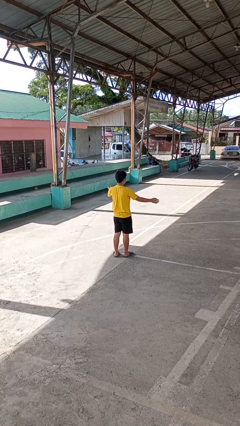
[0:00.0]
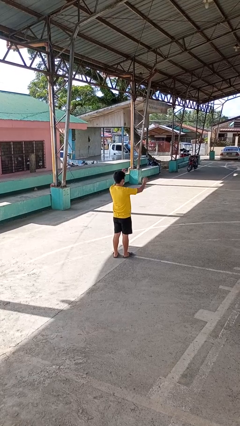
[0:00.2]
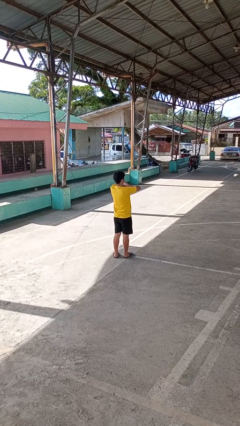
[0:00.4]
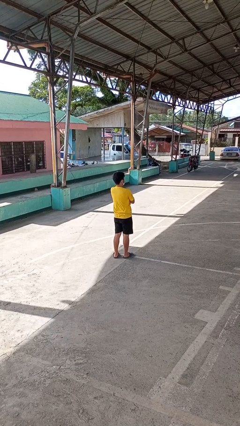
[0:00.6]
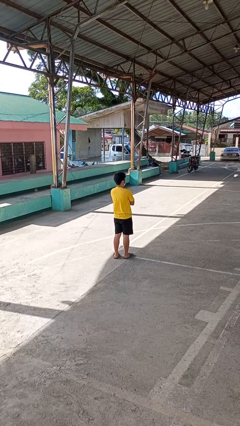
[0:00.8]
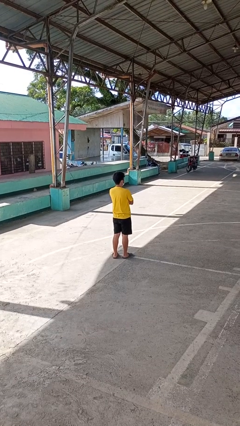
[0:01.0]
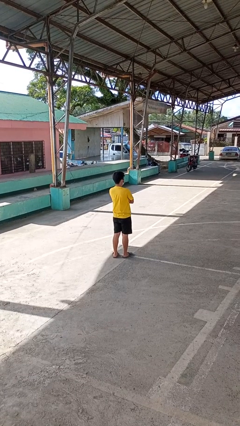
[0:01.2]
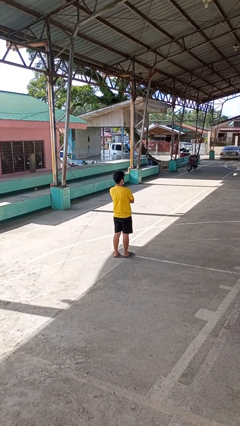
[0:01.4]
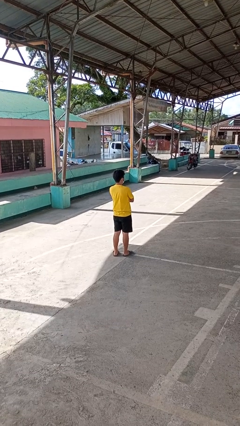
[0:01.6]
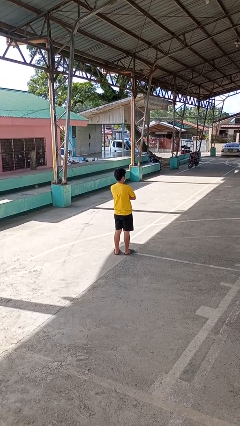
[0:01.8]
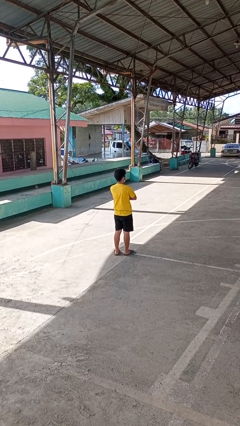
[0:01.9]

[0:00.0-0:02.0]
person crosses arms

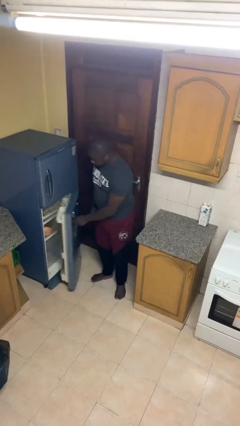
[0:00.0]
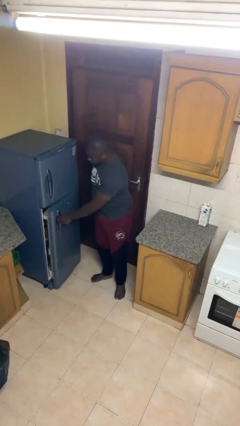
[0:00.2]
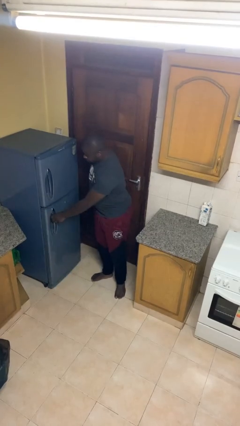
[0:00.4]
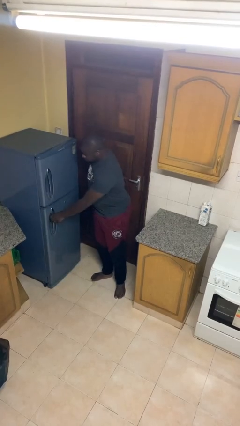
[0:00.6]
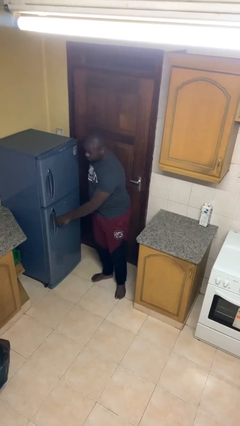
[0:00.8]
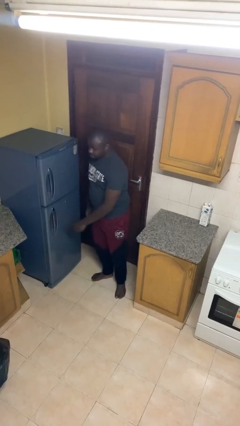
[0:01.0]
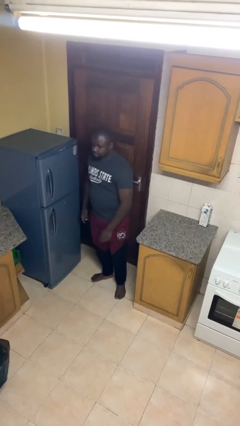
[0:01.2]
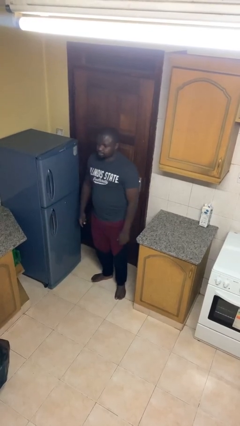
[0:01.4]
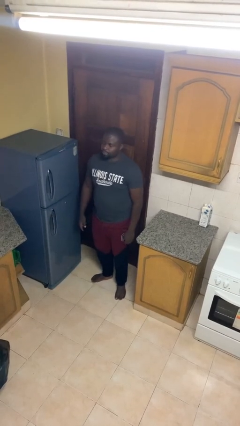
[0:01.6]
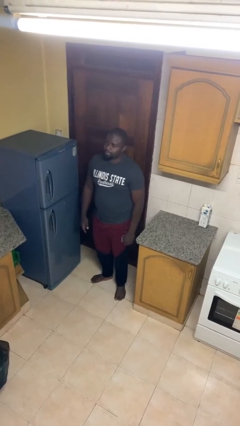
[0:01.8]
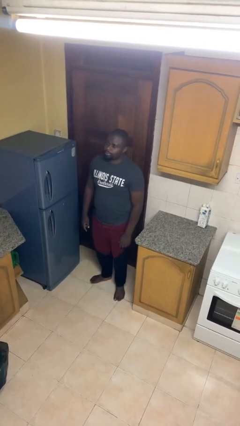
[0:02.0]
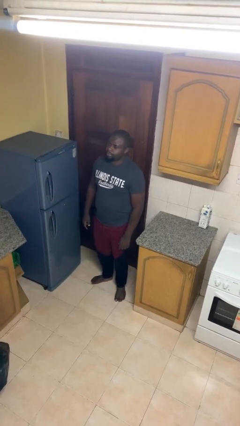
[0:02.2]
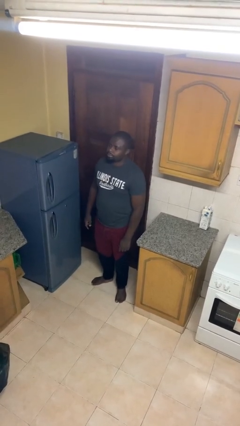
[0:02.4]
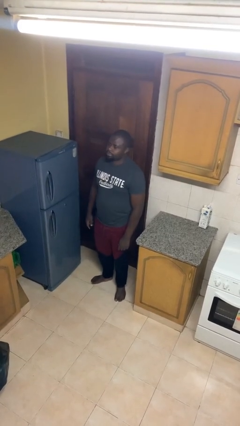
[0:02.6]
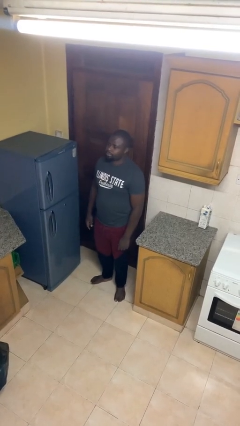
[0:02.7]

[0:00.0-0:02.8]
person closes refrigerator

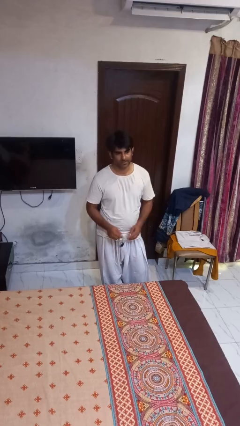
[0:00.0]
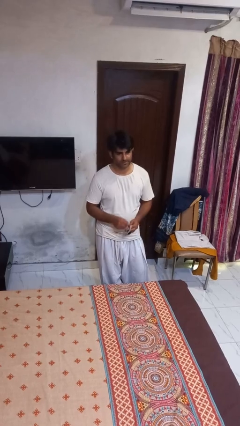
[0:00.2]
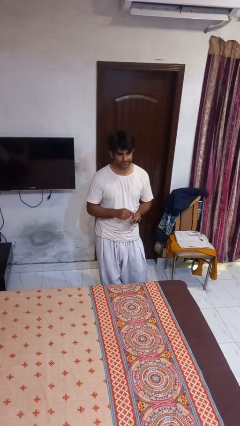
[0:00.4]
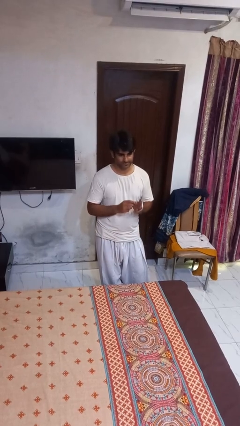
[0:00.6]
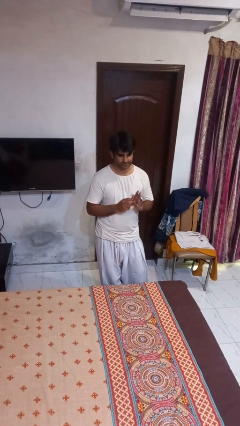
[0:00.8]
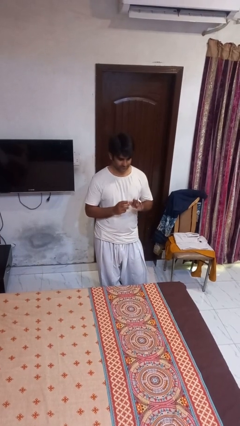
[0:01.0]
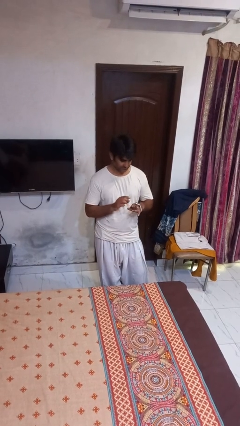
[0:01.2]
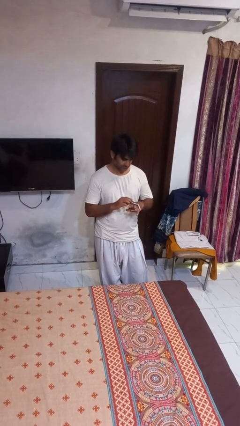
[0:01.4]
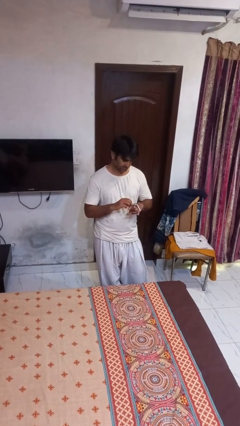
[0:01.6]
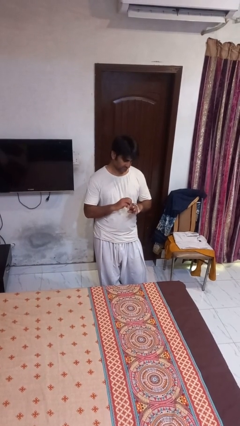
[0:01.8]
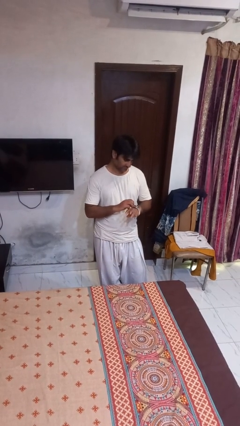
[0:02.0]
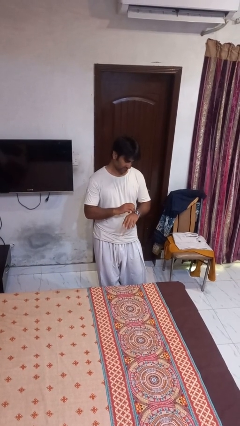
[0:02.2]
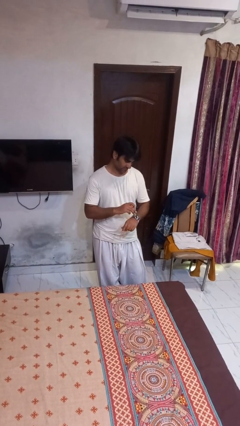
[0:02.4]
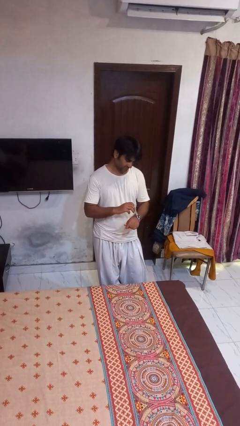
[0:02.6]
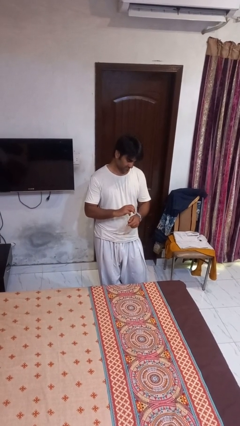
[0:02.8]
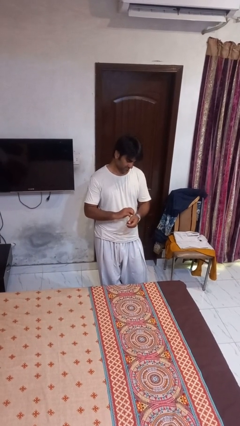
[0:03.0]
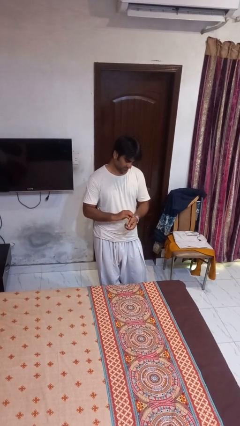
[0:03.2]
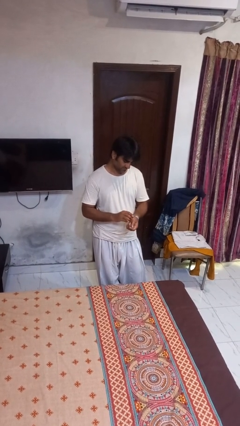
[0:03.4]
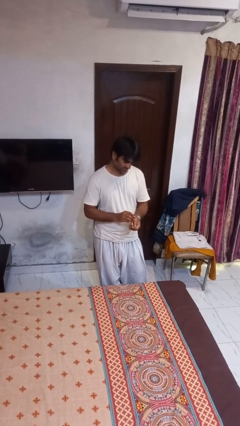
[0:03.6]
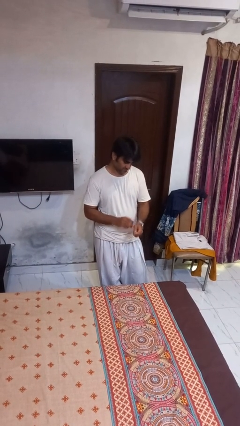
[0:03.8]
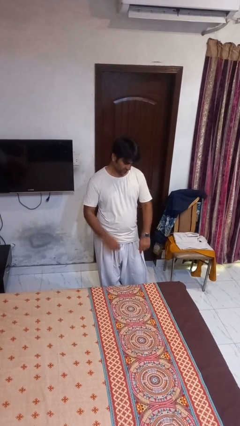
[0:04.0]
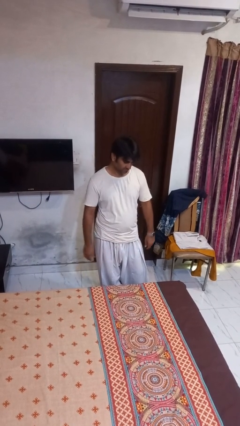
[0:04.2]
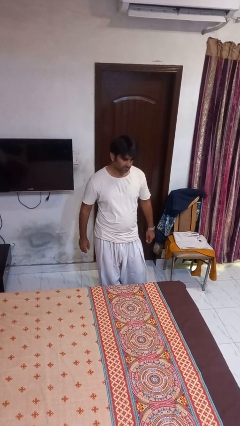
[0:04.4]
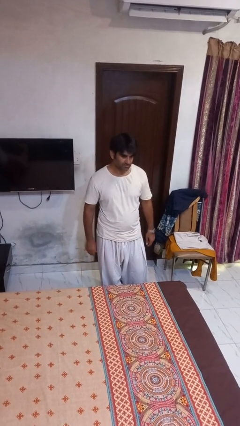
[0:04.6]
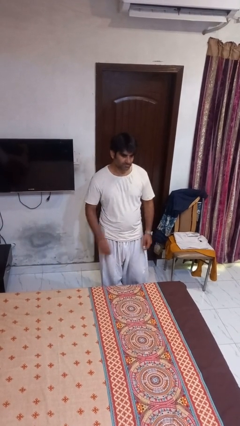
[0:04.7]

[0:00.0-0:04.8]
person puts on wristwatch

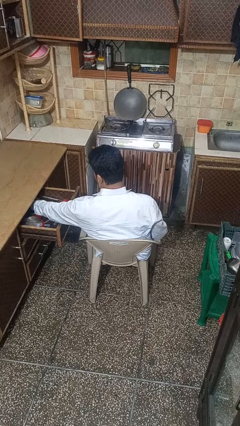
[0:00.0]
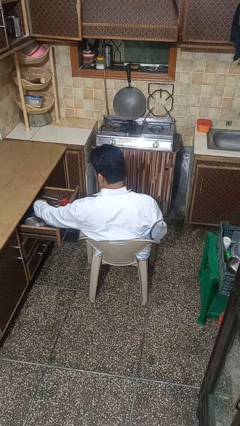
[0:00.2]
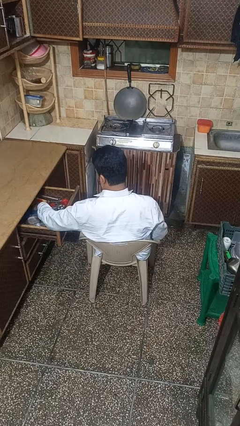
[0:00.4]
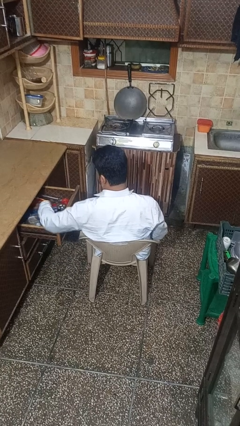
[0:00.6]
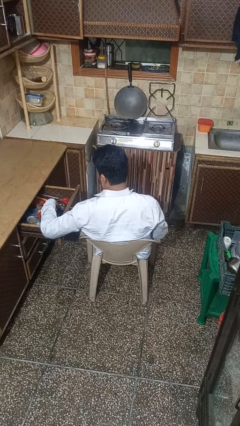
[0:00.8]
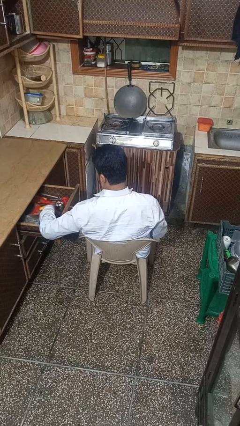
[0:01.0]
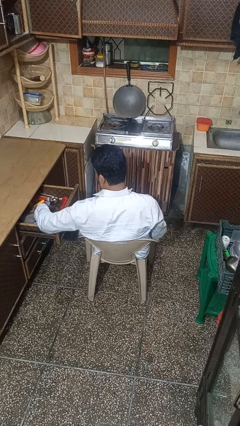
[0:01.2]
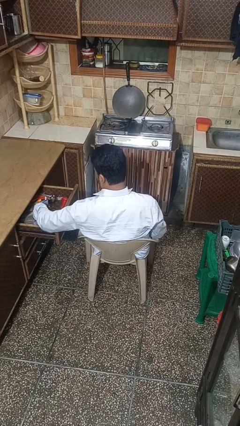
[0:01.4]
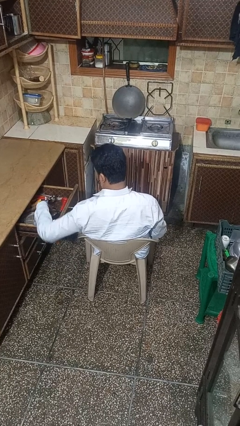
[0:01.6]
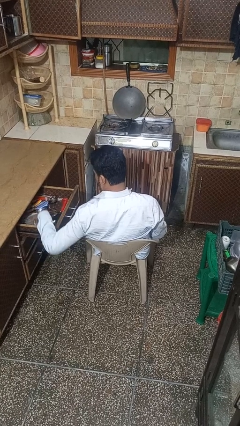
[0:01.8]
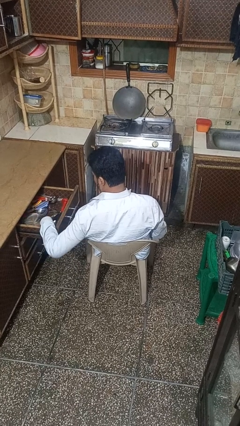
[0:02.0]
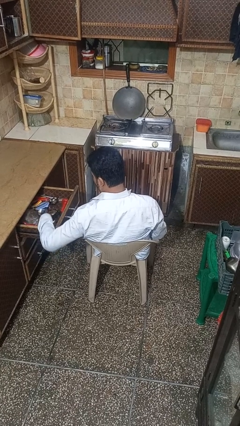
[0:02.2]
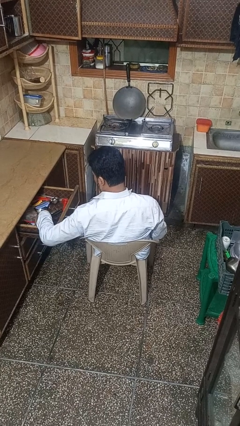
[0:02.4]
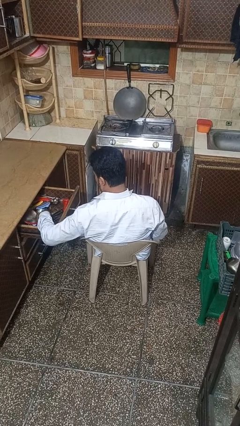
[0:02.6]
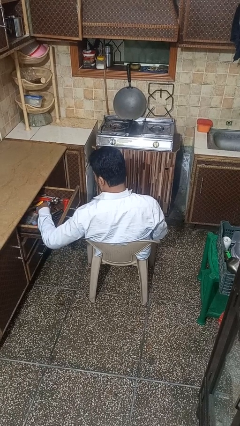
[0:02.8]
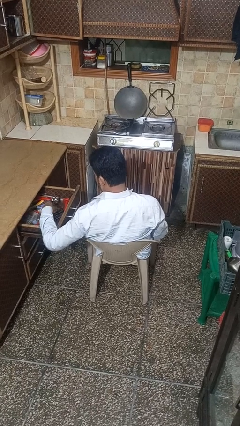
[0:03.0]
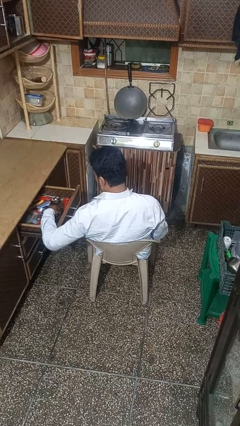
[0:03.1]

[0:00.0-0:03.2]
person searches in kitchen drawer

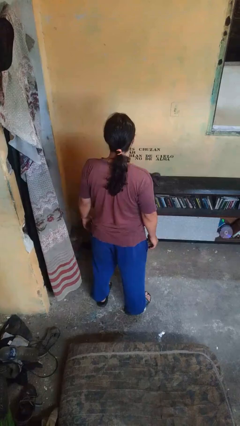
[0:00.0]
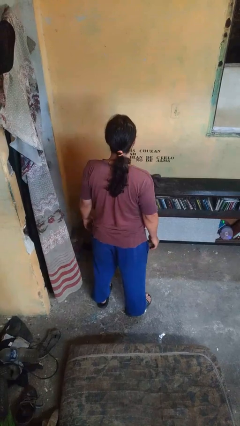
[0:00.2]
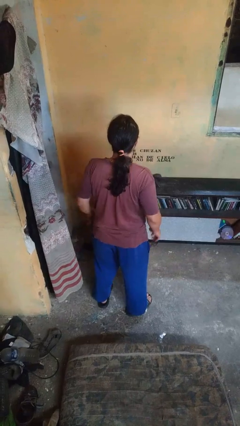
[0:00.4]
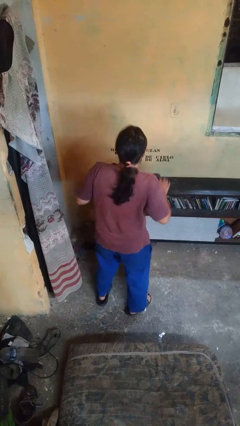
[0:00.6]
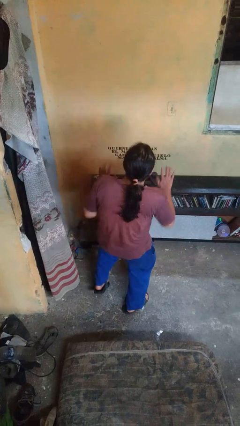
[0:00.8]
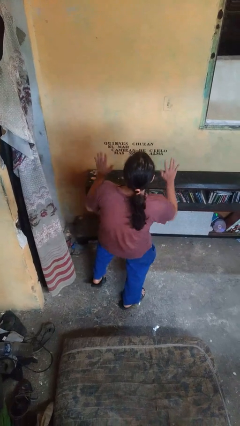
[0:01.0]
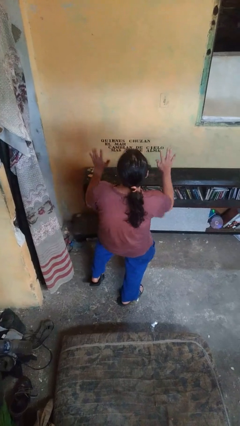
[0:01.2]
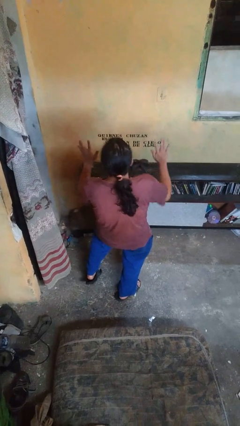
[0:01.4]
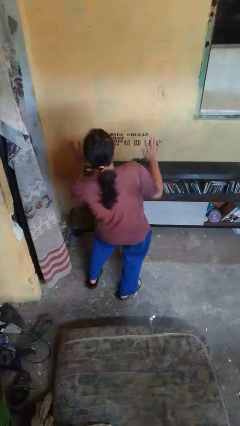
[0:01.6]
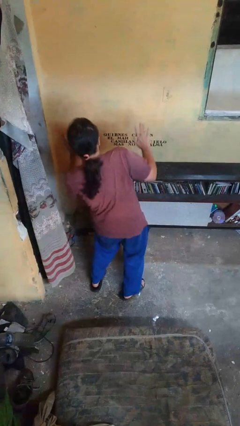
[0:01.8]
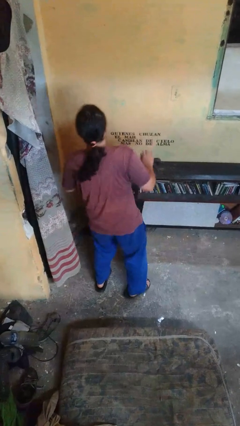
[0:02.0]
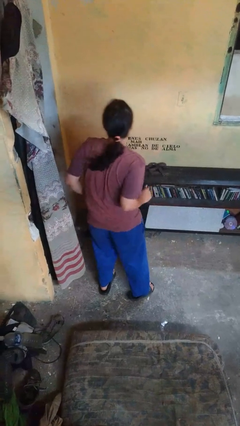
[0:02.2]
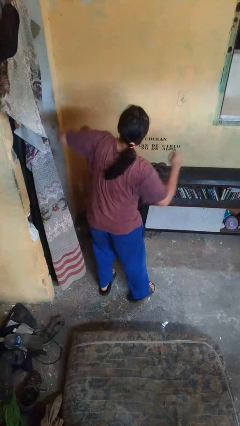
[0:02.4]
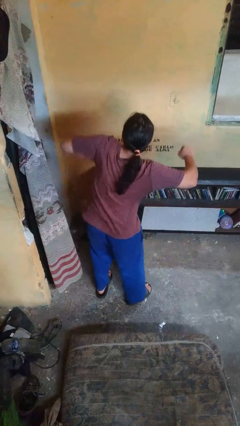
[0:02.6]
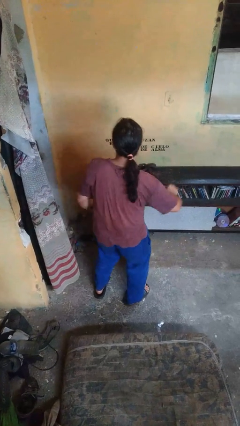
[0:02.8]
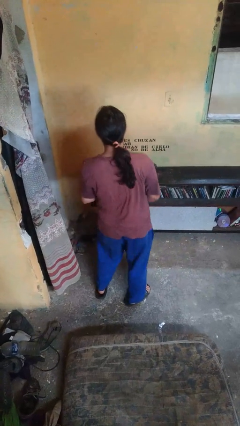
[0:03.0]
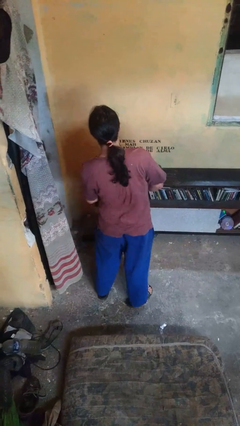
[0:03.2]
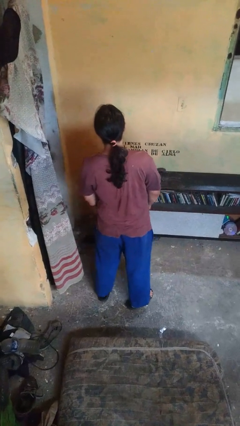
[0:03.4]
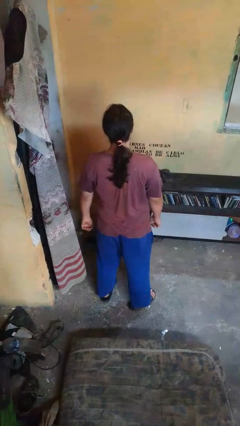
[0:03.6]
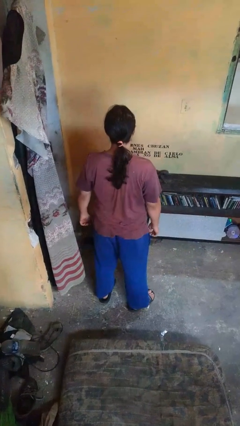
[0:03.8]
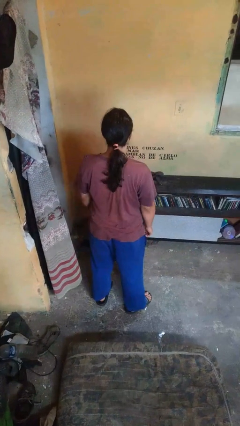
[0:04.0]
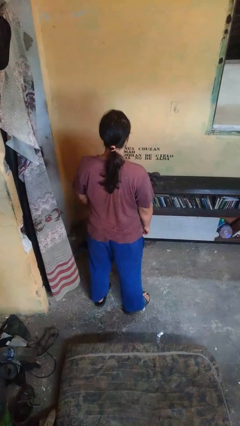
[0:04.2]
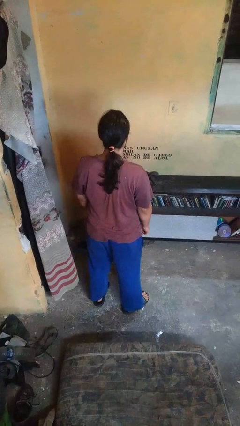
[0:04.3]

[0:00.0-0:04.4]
person dances in place
